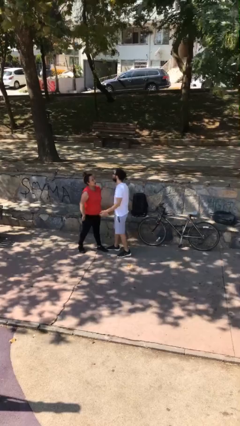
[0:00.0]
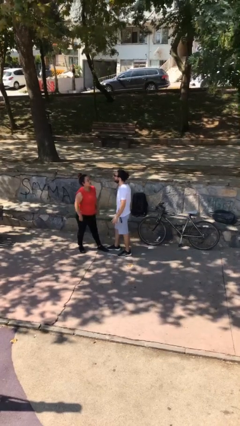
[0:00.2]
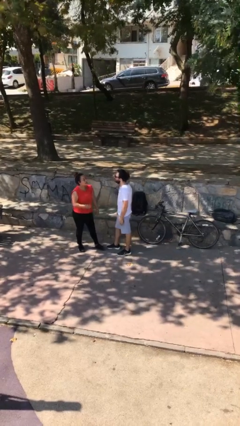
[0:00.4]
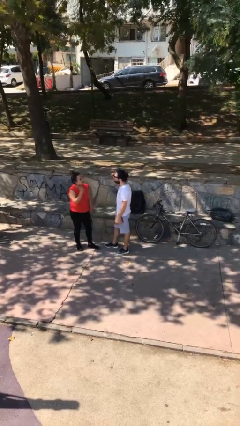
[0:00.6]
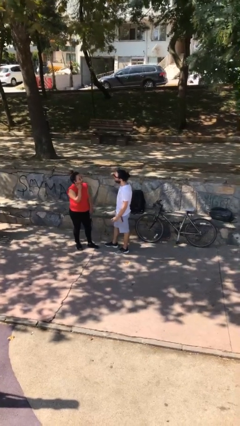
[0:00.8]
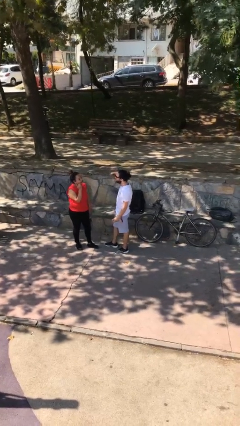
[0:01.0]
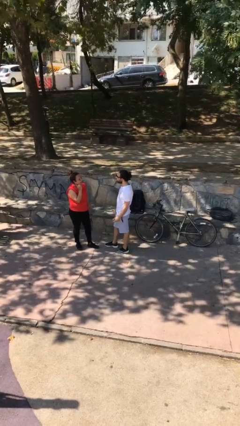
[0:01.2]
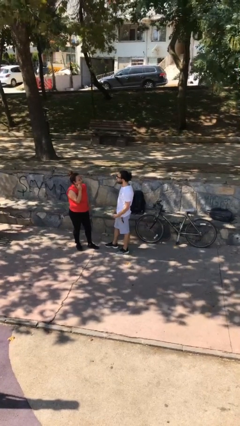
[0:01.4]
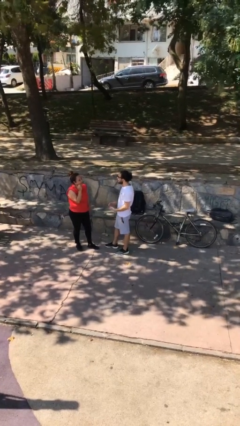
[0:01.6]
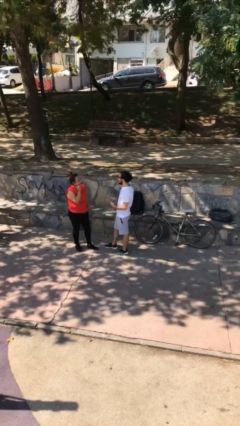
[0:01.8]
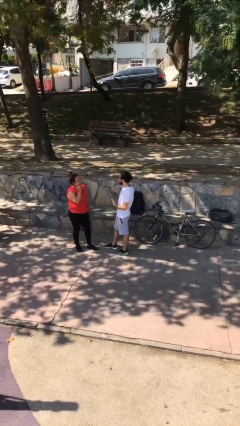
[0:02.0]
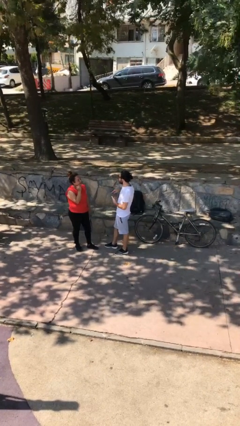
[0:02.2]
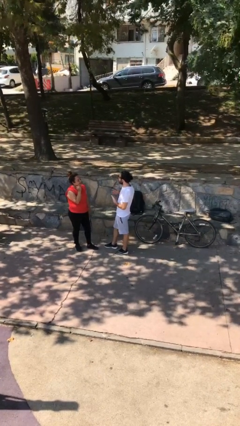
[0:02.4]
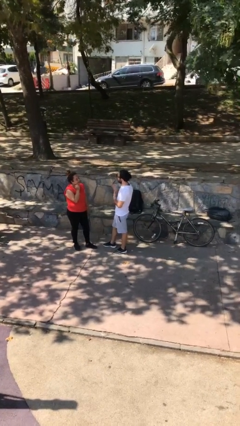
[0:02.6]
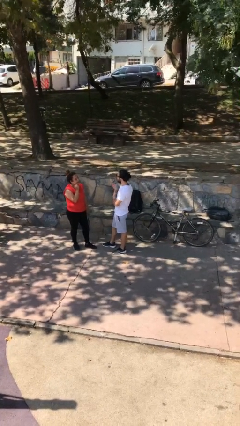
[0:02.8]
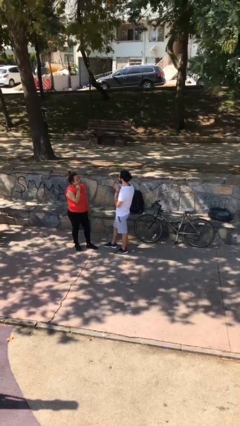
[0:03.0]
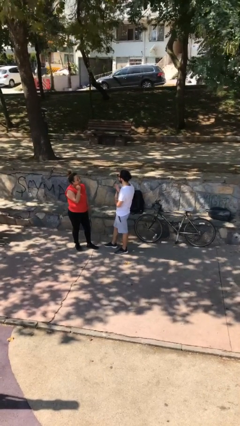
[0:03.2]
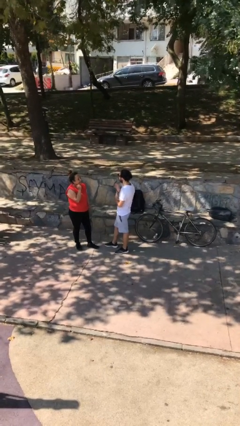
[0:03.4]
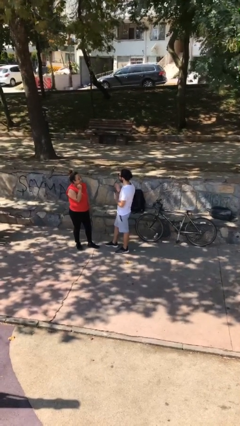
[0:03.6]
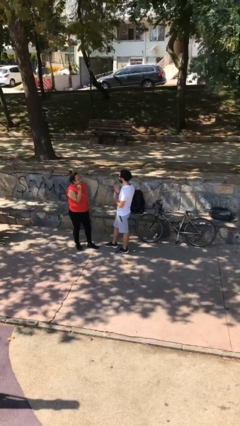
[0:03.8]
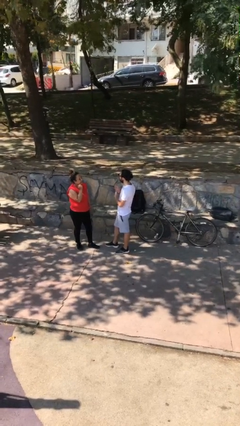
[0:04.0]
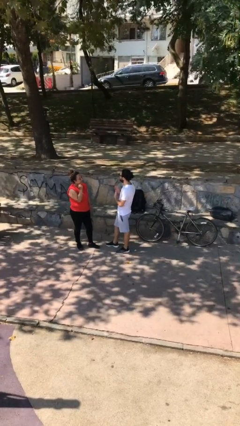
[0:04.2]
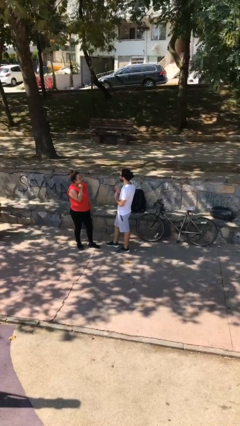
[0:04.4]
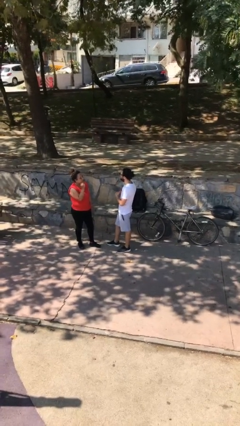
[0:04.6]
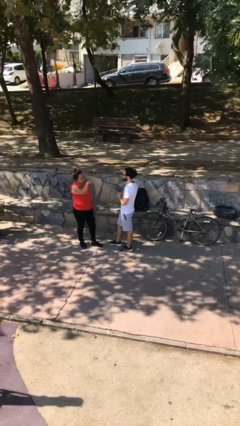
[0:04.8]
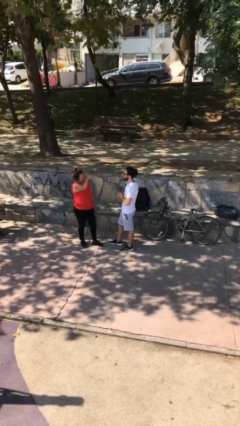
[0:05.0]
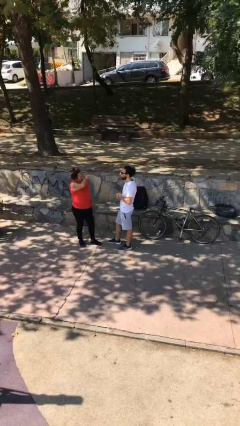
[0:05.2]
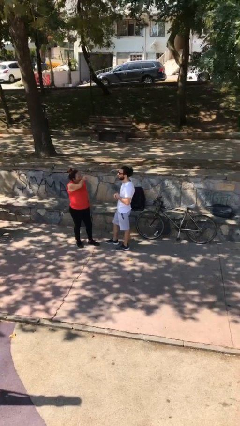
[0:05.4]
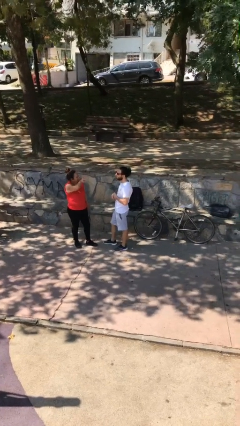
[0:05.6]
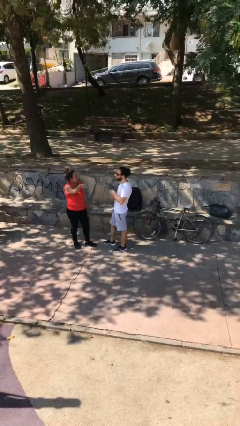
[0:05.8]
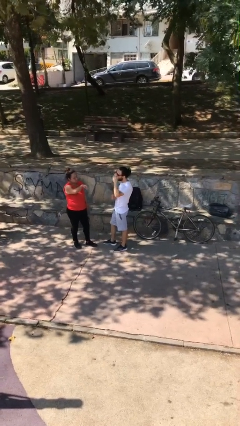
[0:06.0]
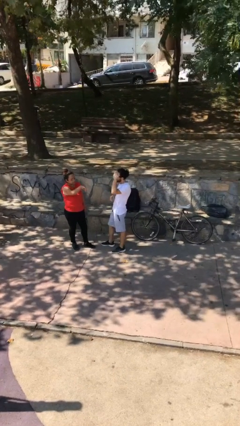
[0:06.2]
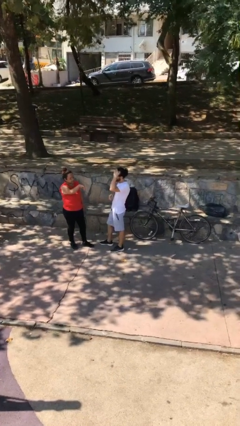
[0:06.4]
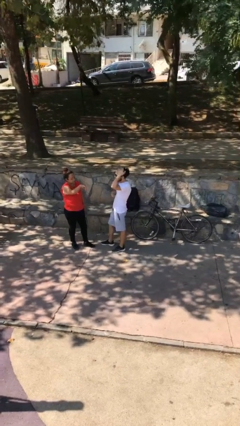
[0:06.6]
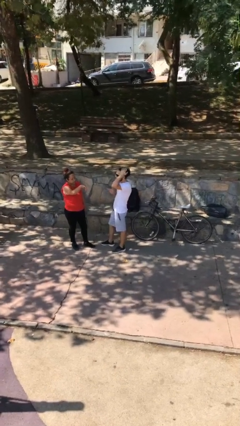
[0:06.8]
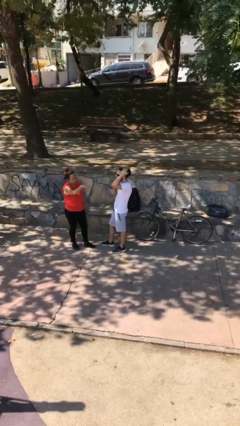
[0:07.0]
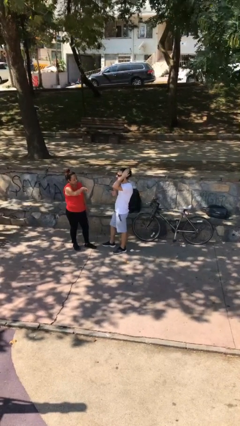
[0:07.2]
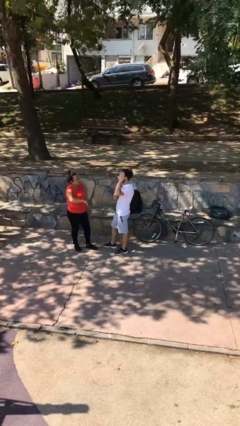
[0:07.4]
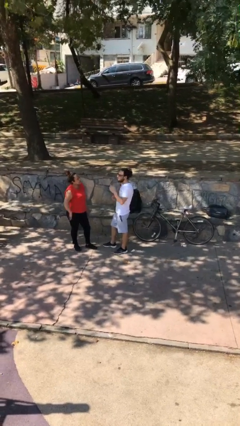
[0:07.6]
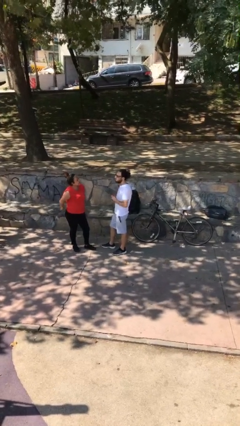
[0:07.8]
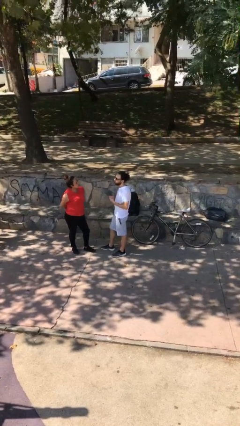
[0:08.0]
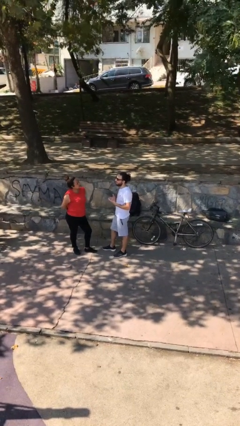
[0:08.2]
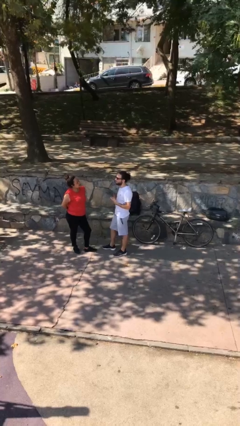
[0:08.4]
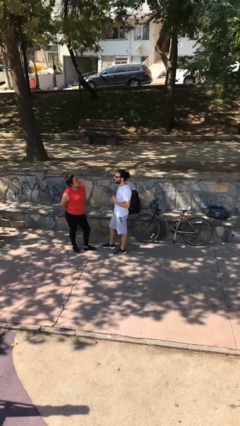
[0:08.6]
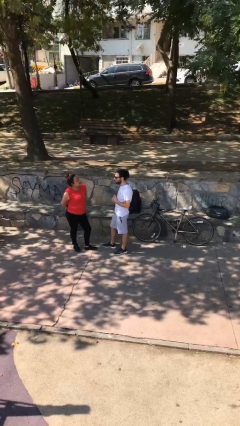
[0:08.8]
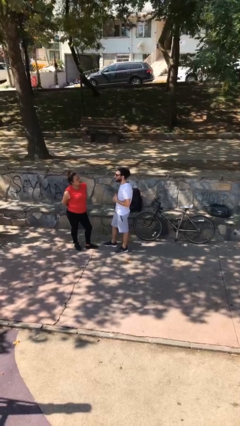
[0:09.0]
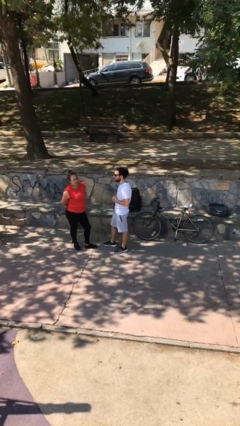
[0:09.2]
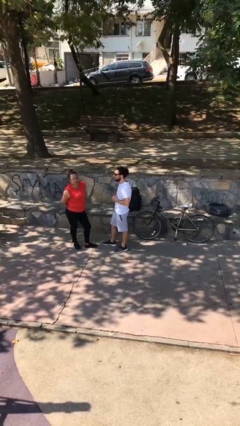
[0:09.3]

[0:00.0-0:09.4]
person talks to person

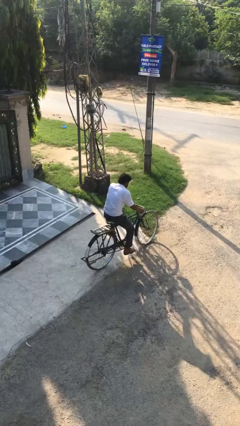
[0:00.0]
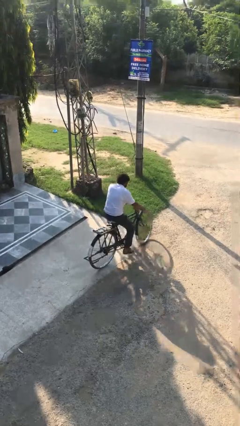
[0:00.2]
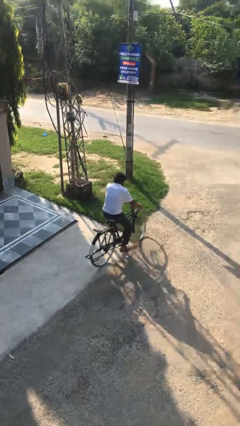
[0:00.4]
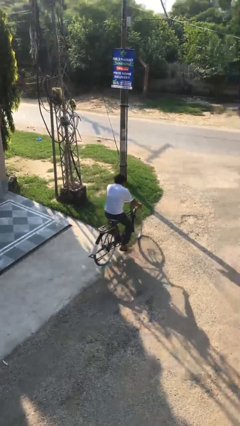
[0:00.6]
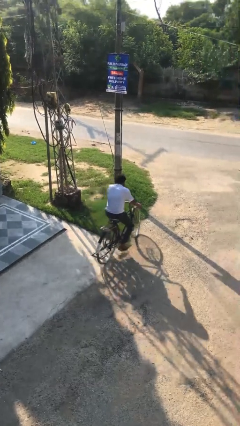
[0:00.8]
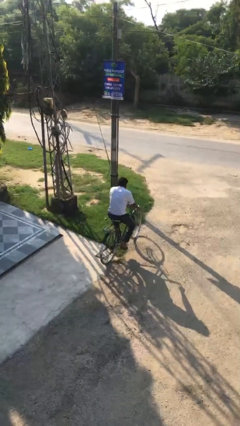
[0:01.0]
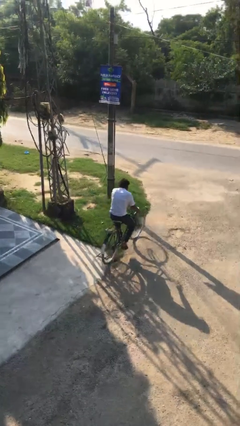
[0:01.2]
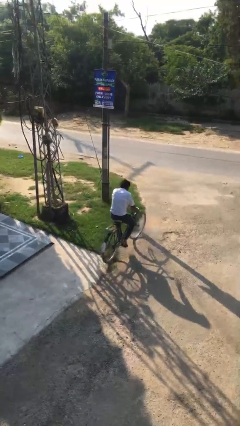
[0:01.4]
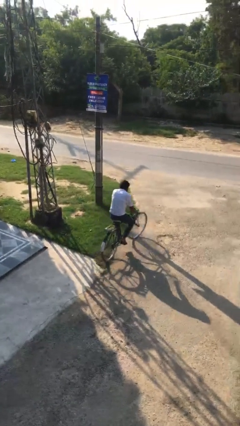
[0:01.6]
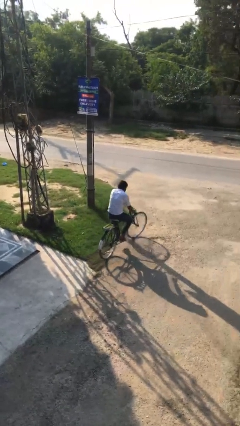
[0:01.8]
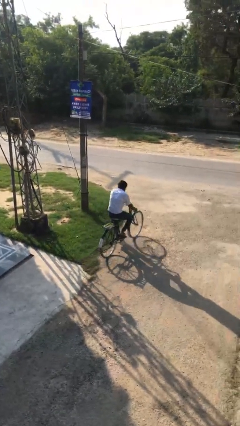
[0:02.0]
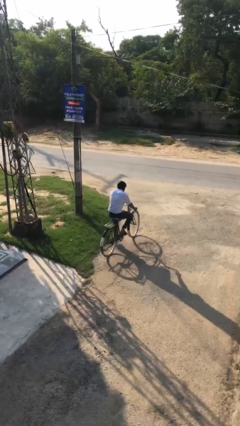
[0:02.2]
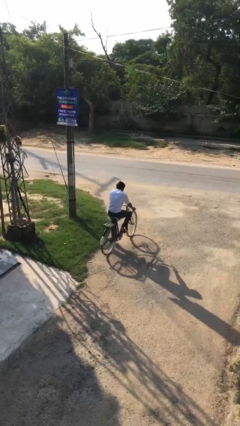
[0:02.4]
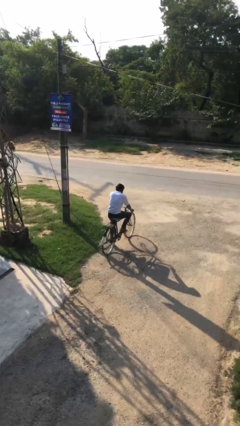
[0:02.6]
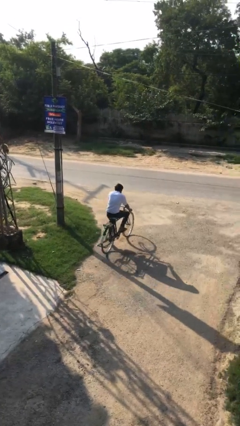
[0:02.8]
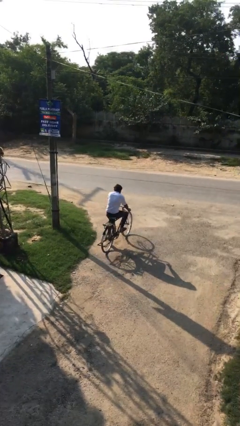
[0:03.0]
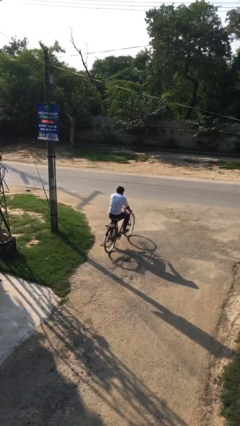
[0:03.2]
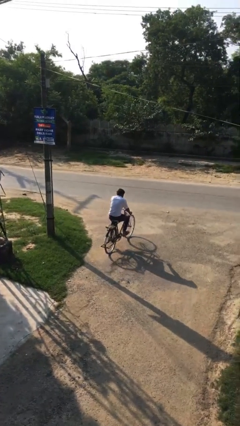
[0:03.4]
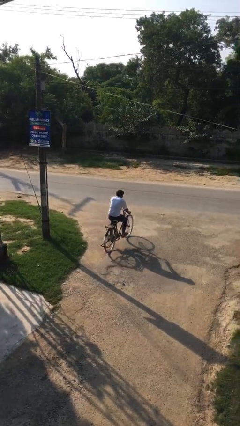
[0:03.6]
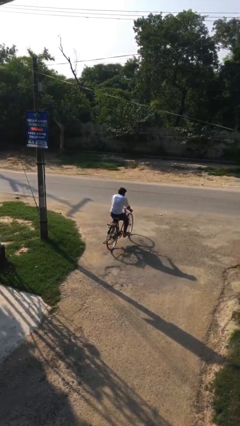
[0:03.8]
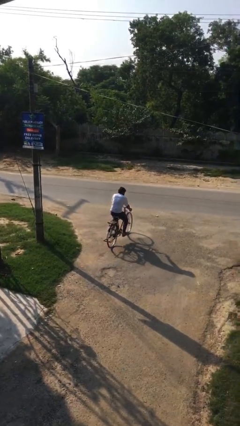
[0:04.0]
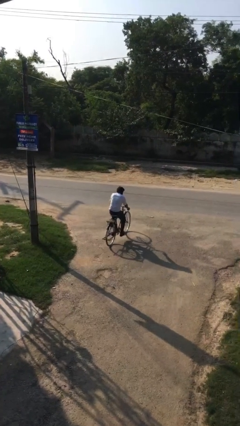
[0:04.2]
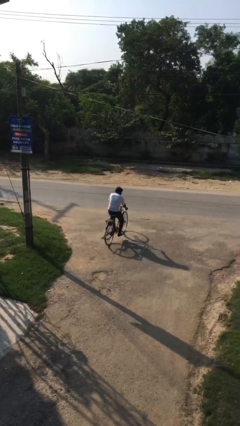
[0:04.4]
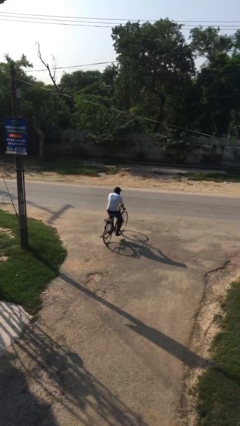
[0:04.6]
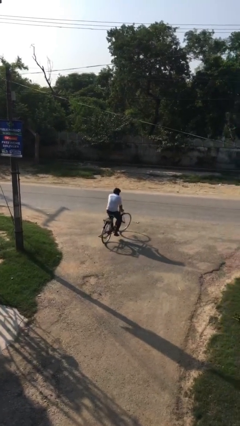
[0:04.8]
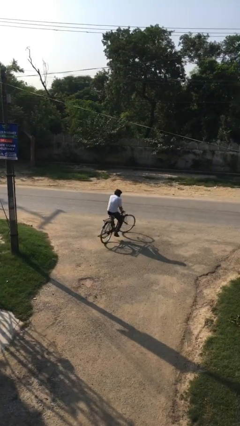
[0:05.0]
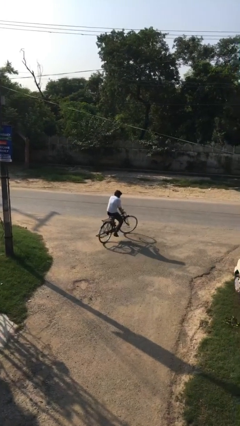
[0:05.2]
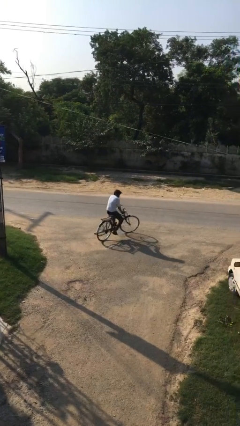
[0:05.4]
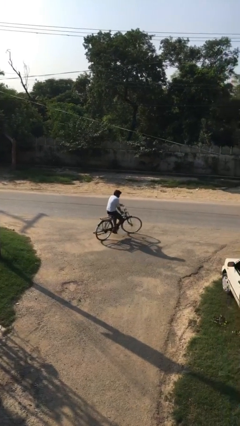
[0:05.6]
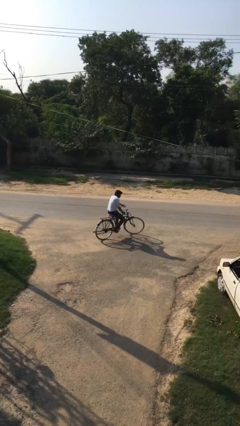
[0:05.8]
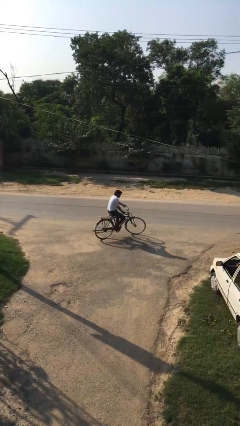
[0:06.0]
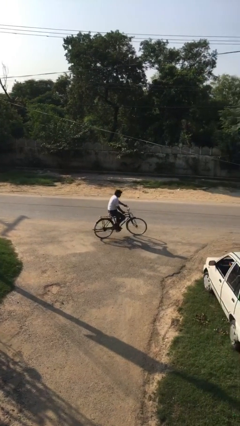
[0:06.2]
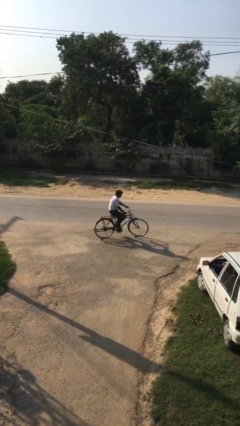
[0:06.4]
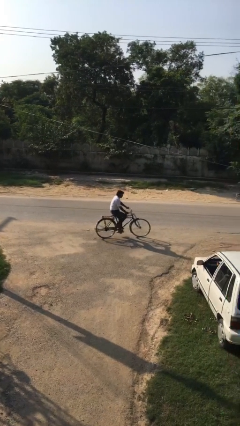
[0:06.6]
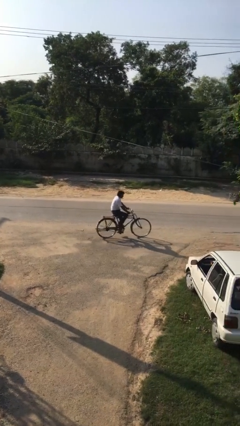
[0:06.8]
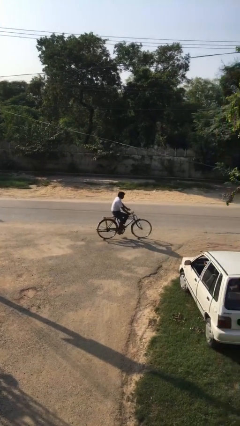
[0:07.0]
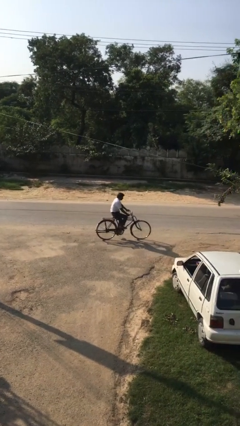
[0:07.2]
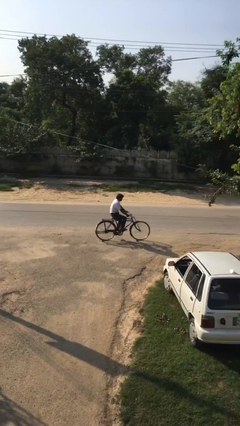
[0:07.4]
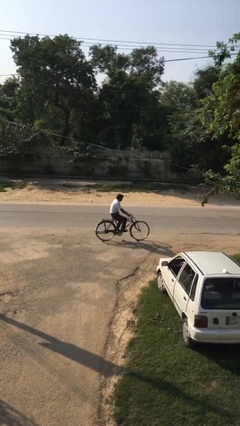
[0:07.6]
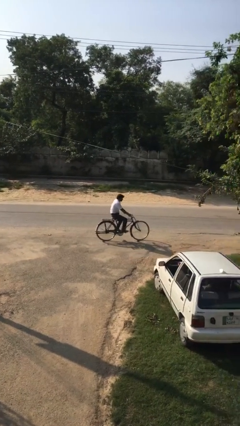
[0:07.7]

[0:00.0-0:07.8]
person rides bicycle

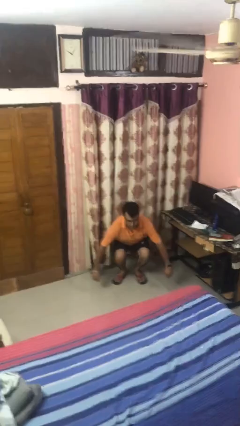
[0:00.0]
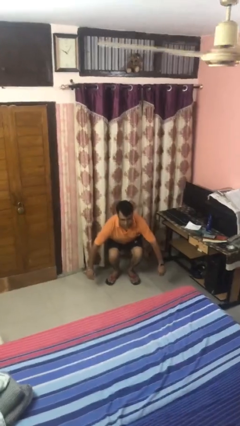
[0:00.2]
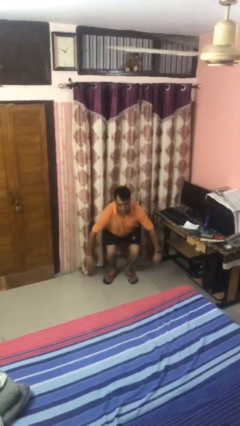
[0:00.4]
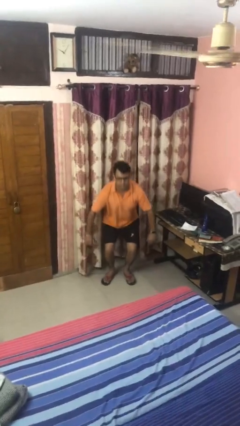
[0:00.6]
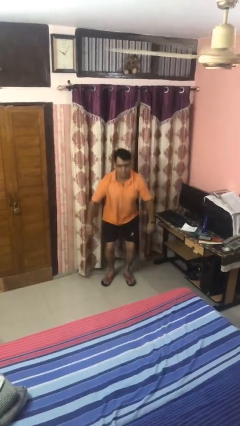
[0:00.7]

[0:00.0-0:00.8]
person stands up
